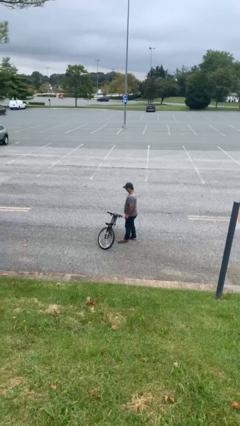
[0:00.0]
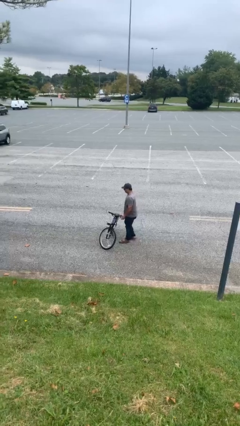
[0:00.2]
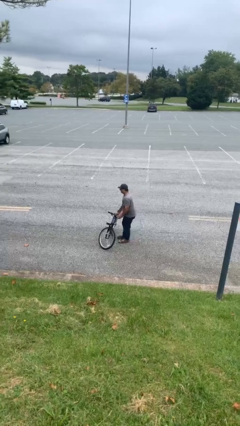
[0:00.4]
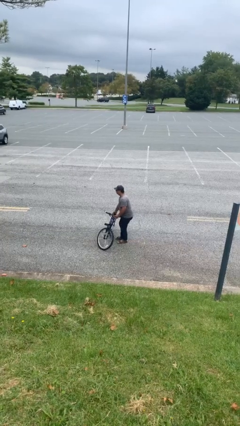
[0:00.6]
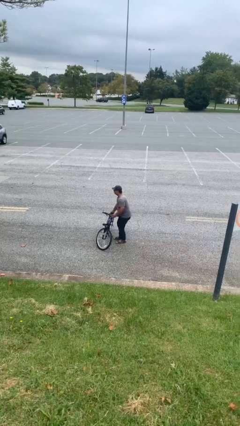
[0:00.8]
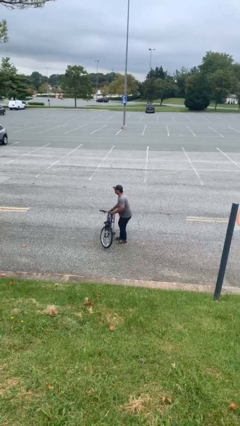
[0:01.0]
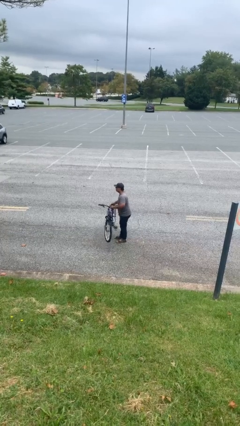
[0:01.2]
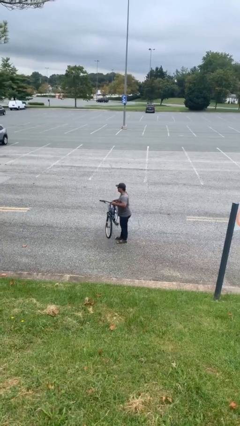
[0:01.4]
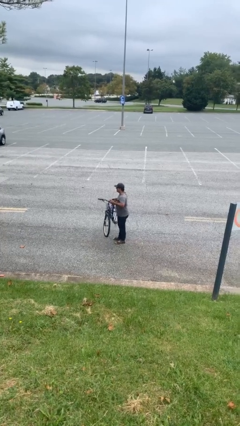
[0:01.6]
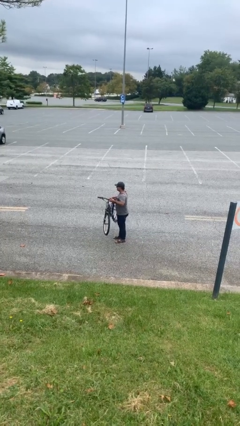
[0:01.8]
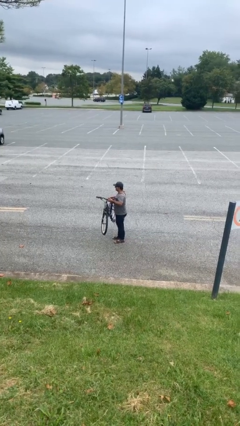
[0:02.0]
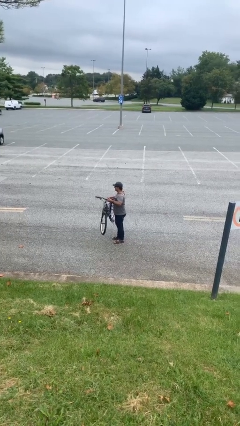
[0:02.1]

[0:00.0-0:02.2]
person picks up object from floor

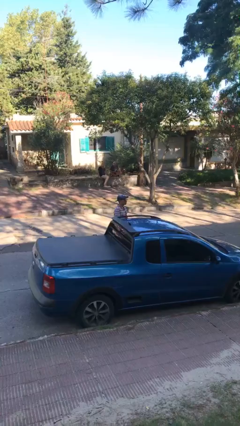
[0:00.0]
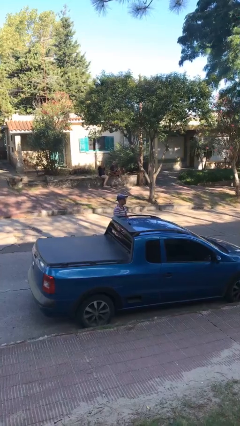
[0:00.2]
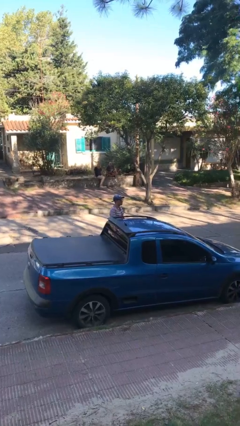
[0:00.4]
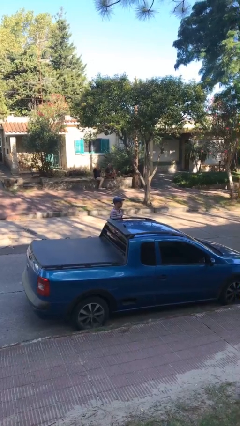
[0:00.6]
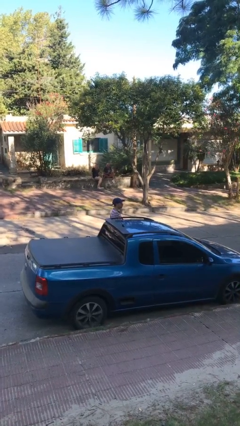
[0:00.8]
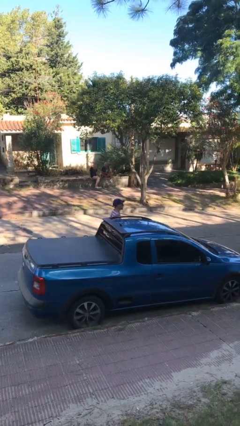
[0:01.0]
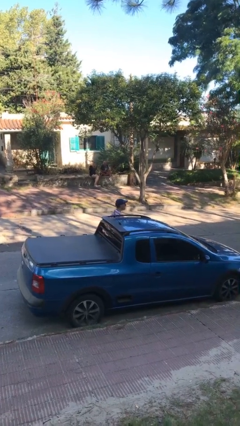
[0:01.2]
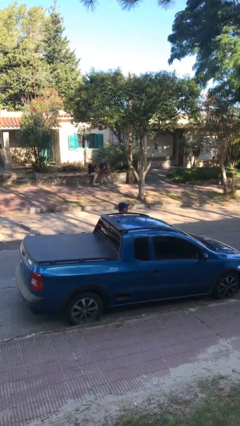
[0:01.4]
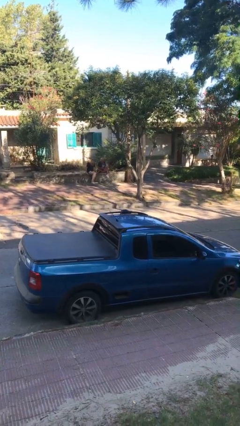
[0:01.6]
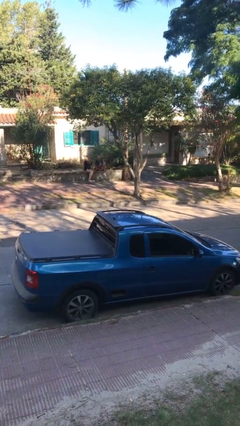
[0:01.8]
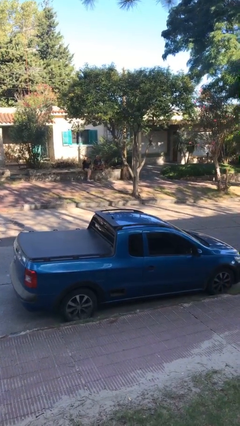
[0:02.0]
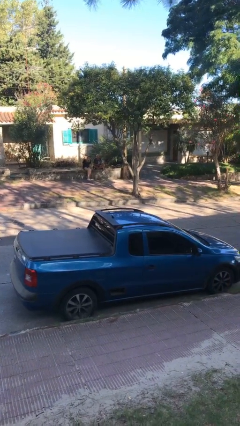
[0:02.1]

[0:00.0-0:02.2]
person enters car

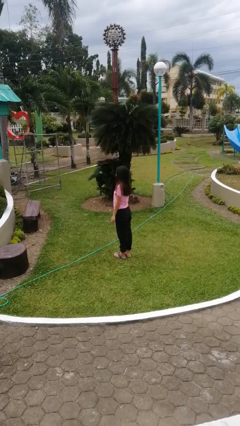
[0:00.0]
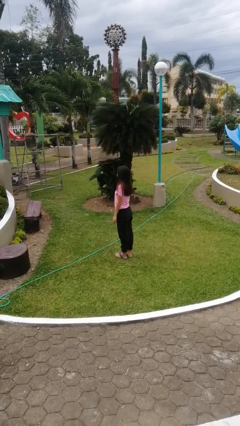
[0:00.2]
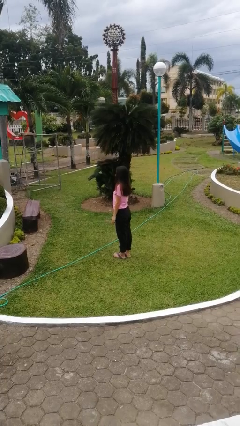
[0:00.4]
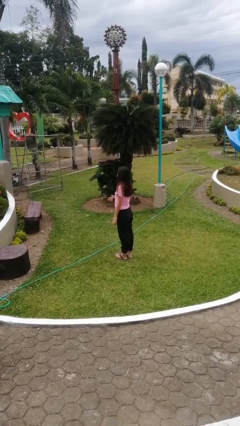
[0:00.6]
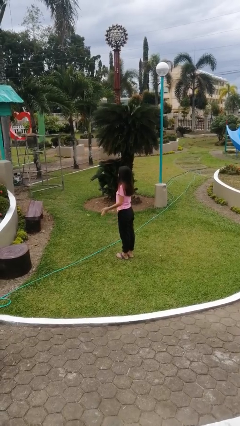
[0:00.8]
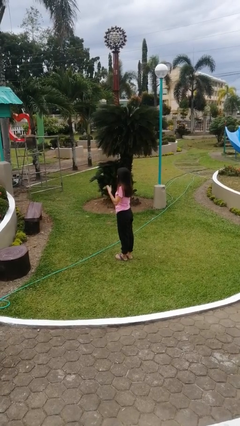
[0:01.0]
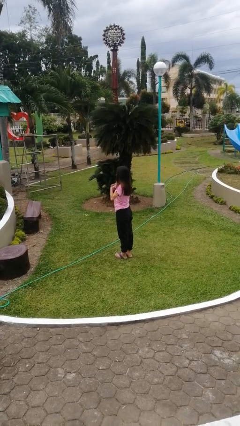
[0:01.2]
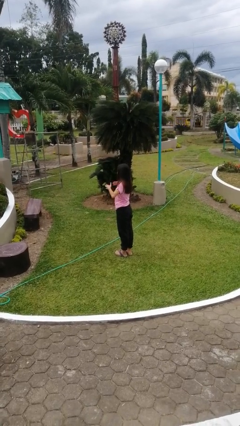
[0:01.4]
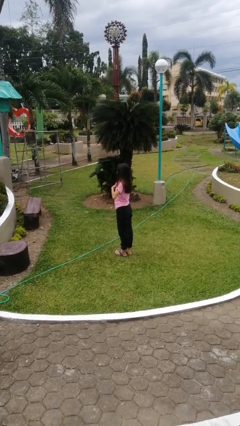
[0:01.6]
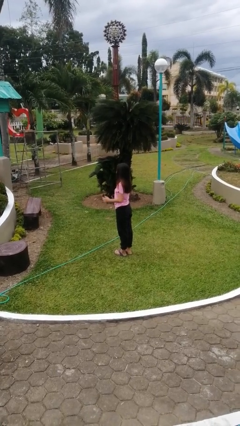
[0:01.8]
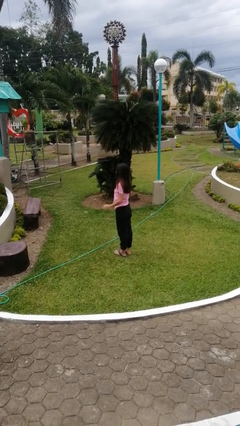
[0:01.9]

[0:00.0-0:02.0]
person drums on chest

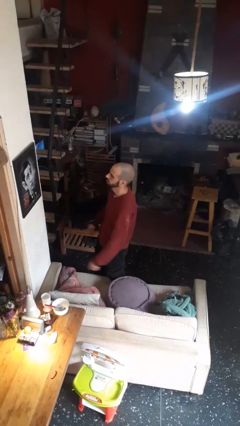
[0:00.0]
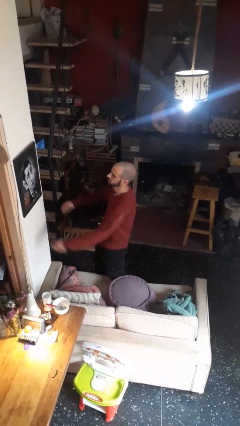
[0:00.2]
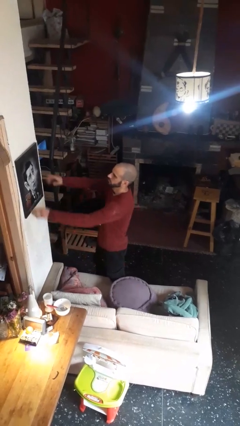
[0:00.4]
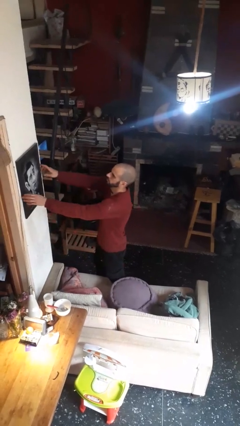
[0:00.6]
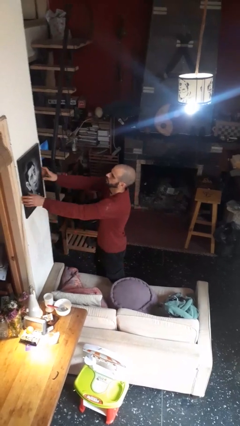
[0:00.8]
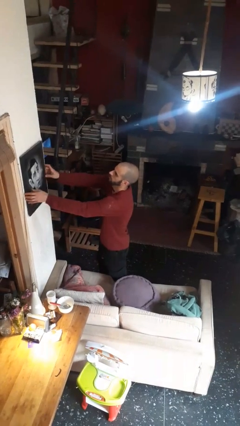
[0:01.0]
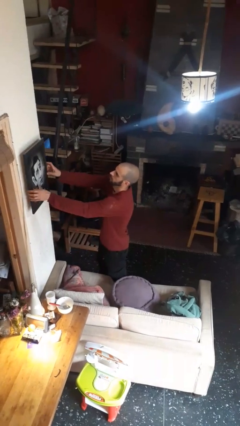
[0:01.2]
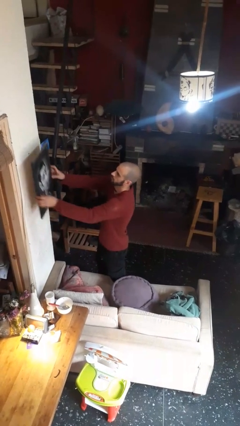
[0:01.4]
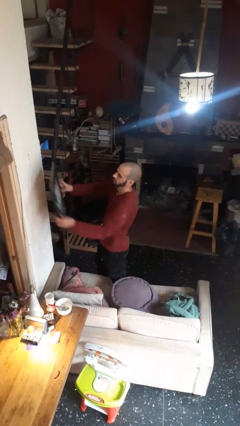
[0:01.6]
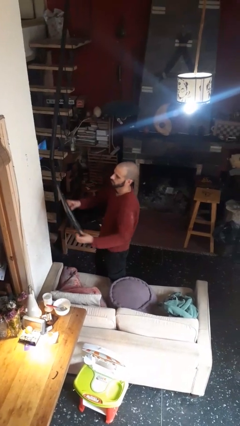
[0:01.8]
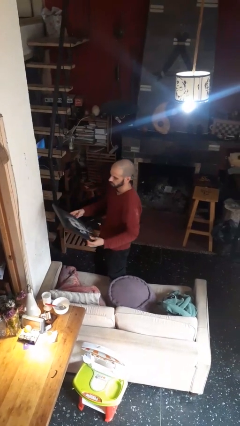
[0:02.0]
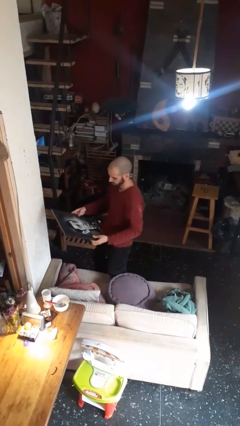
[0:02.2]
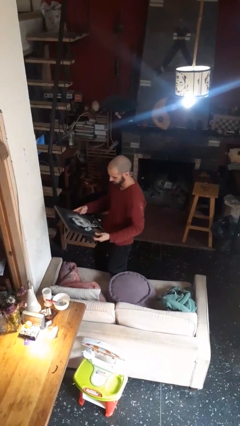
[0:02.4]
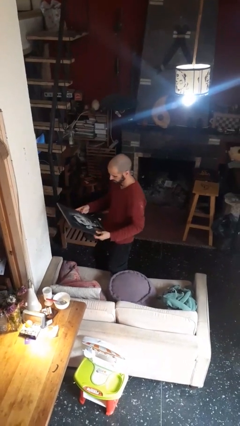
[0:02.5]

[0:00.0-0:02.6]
person takes down picture frame

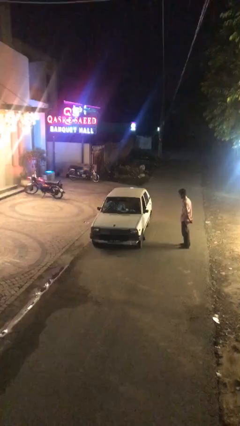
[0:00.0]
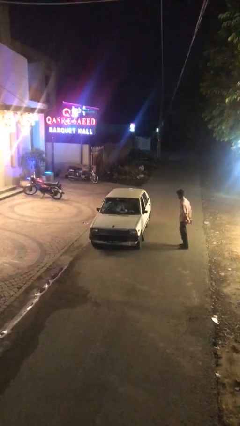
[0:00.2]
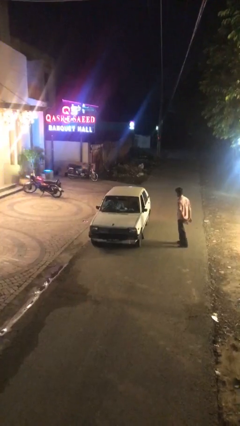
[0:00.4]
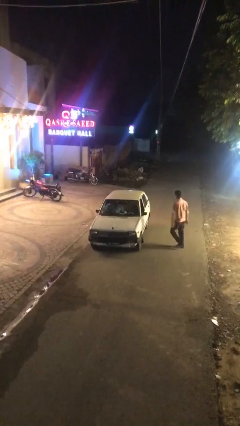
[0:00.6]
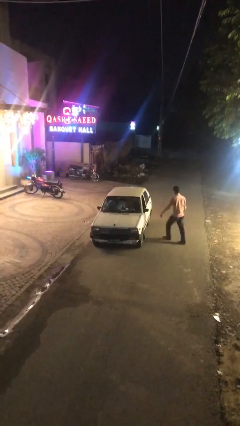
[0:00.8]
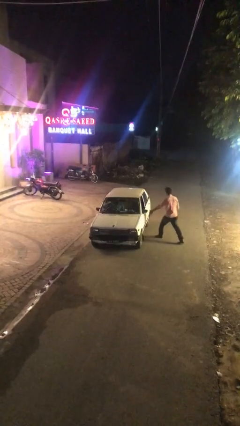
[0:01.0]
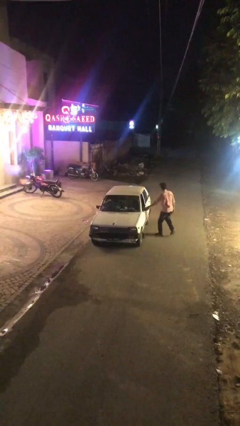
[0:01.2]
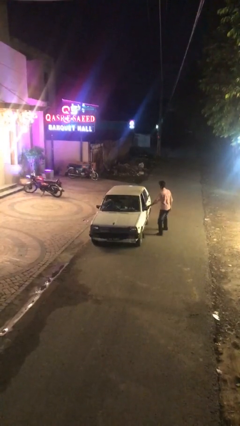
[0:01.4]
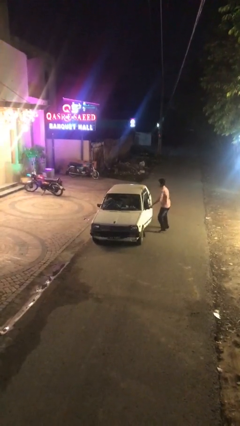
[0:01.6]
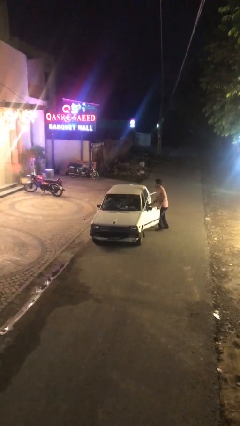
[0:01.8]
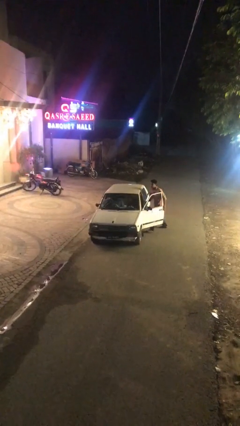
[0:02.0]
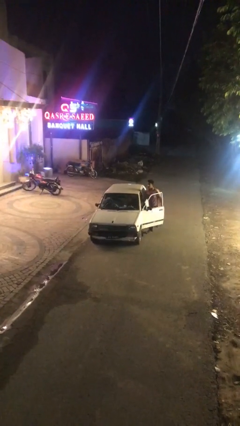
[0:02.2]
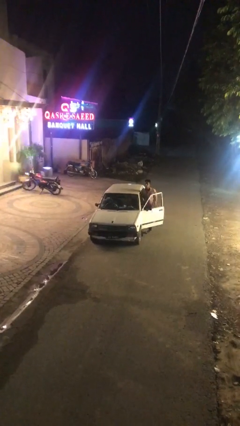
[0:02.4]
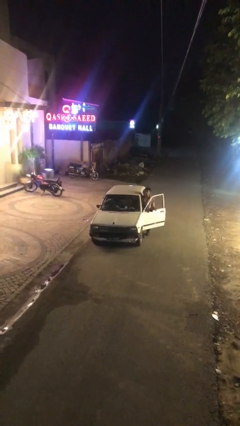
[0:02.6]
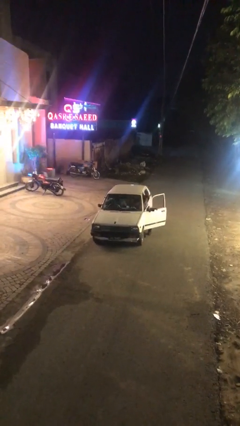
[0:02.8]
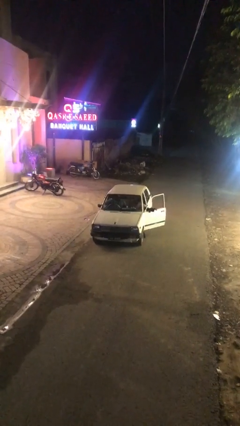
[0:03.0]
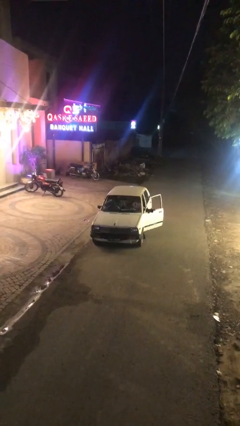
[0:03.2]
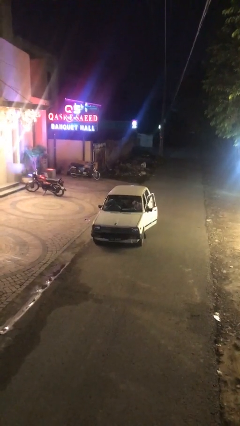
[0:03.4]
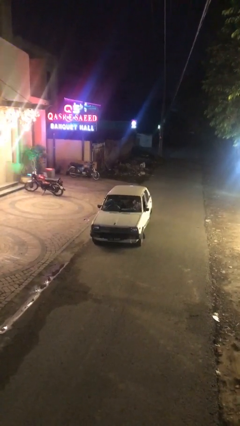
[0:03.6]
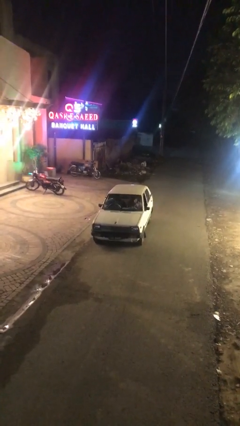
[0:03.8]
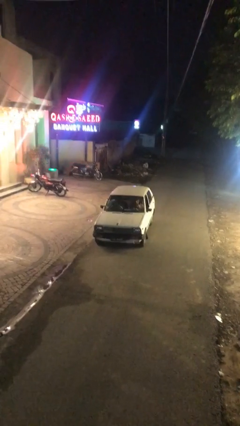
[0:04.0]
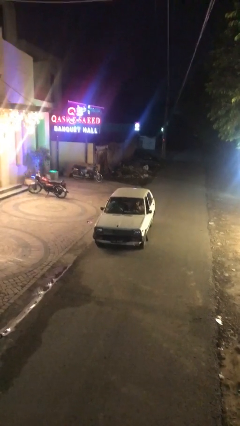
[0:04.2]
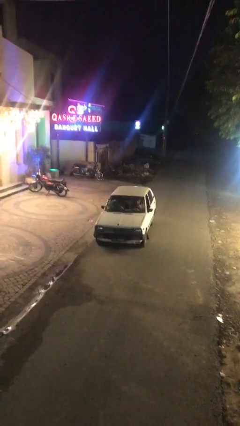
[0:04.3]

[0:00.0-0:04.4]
car picks up person

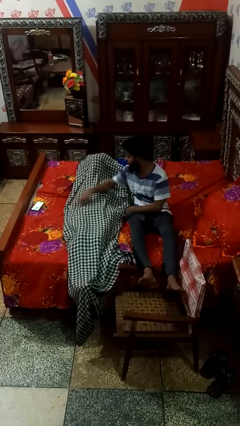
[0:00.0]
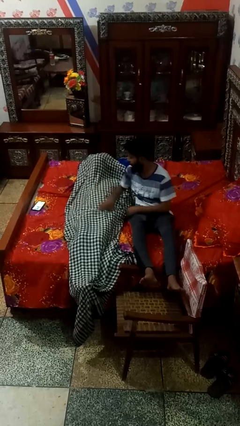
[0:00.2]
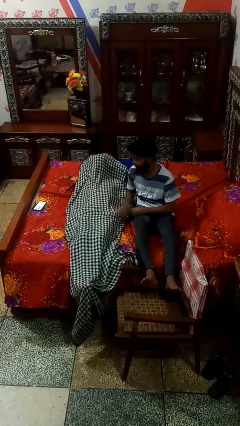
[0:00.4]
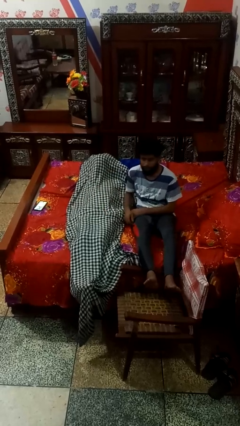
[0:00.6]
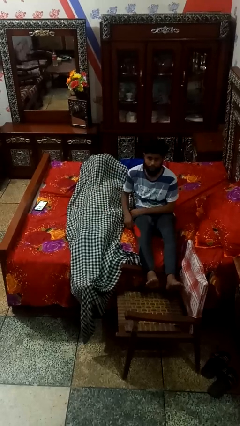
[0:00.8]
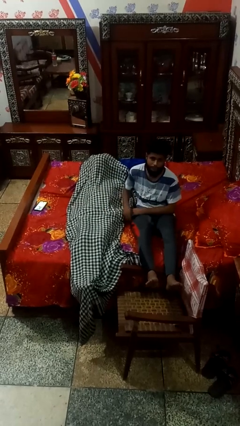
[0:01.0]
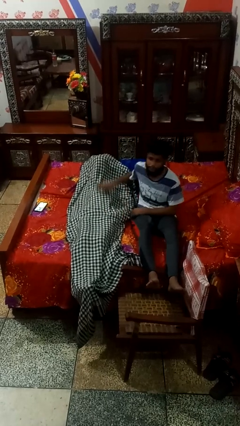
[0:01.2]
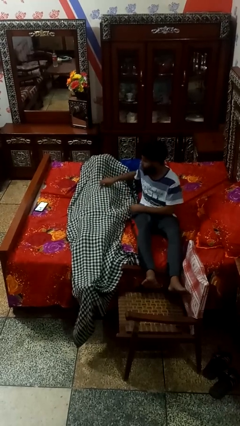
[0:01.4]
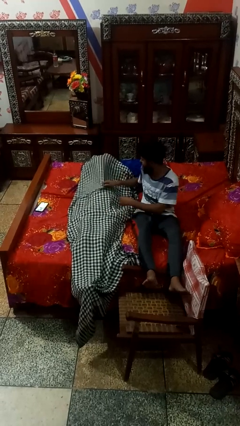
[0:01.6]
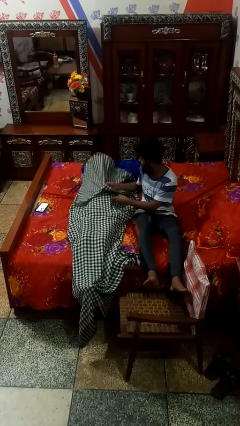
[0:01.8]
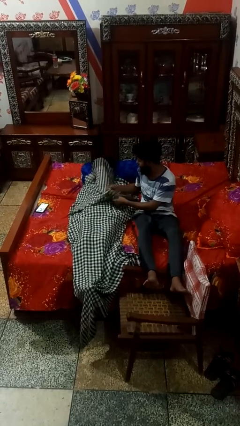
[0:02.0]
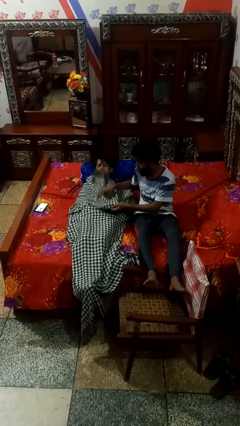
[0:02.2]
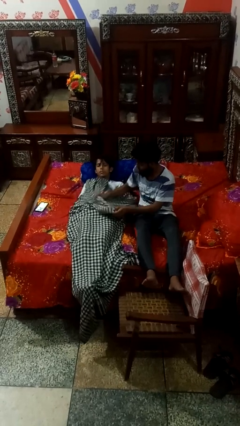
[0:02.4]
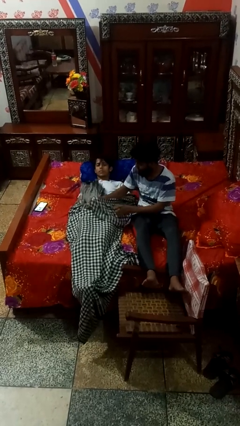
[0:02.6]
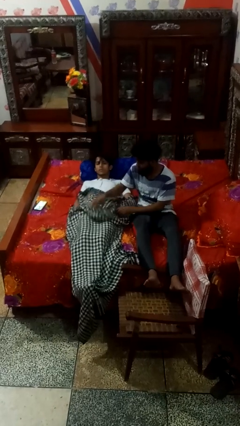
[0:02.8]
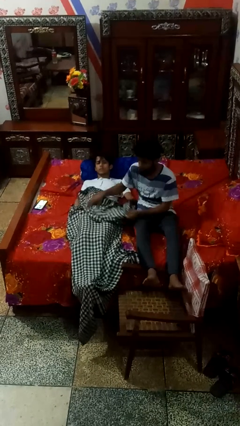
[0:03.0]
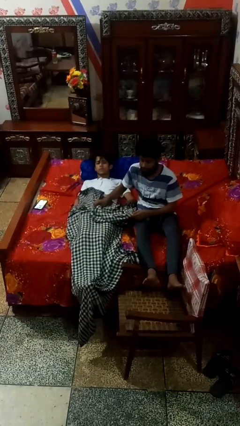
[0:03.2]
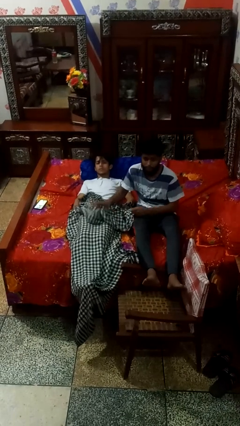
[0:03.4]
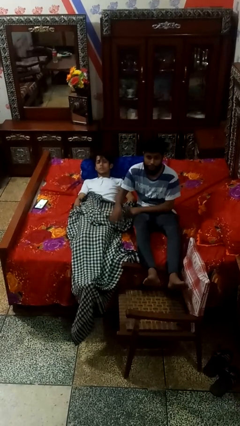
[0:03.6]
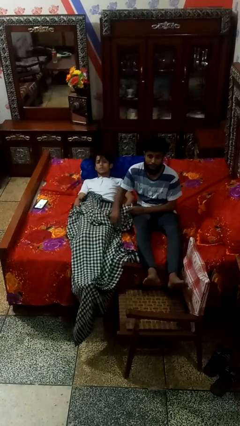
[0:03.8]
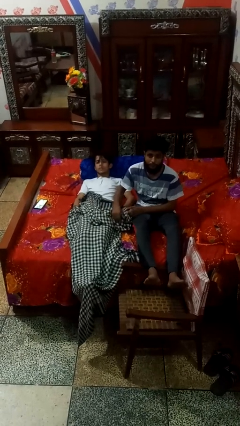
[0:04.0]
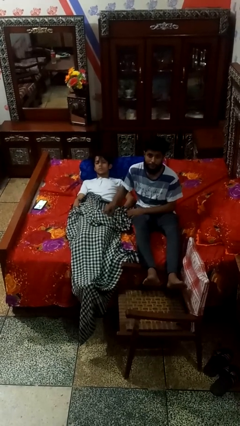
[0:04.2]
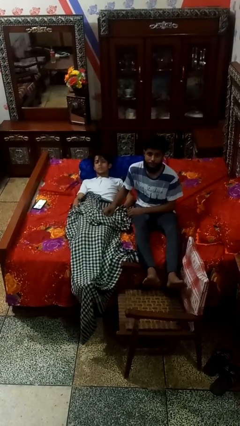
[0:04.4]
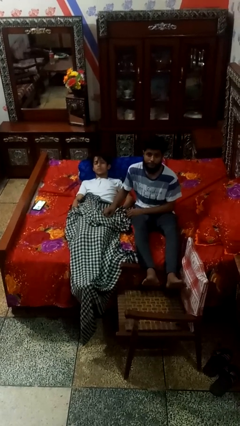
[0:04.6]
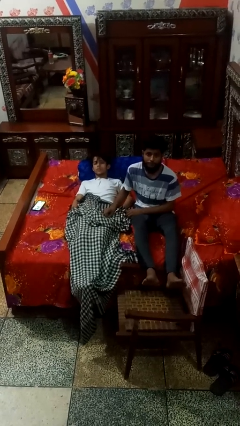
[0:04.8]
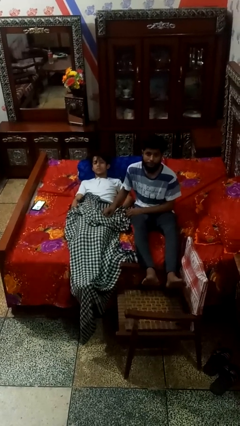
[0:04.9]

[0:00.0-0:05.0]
person uncovers friend with blanket
